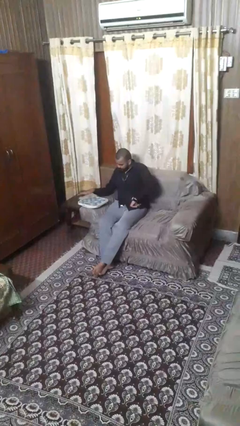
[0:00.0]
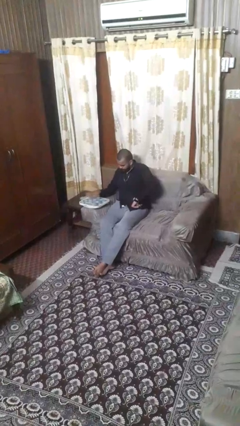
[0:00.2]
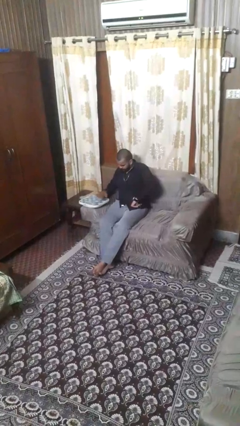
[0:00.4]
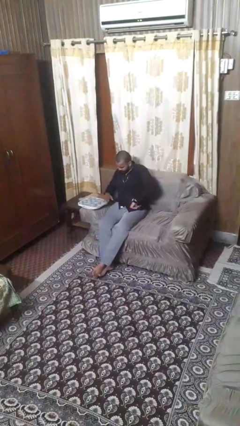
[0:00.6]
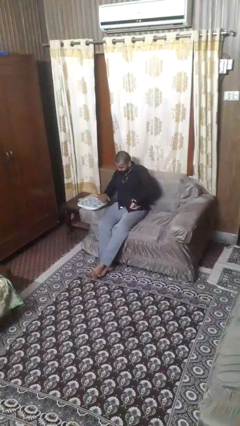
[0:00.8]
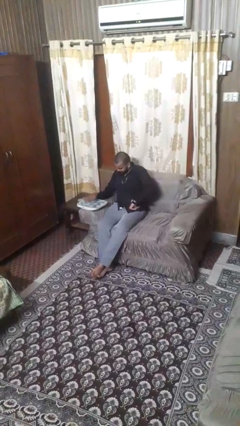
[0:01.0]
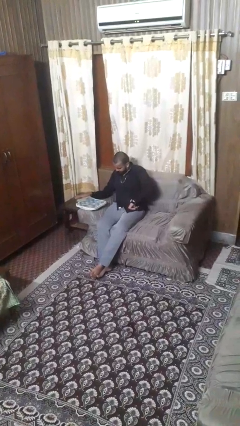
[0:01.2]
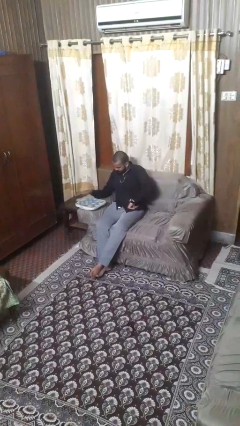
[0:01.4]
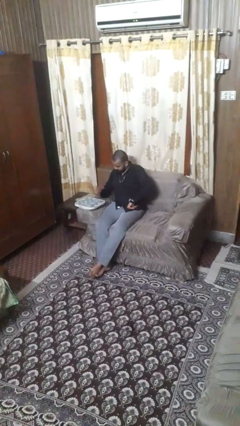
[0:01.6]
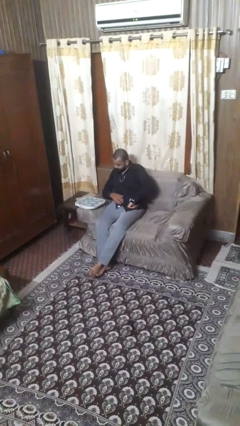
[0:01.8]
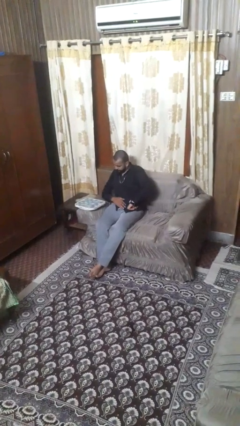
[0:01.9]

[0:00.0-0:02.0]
person waves hand over object

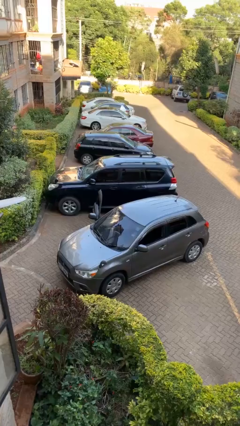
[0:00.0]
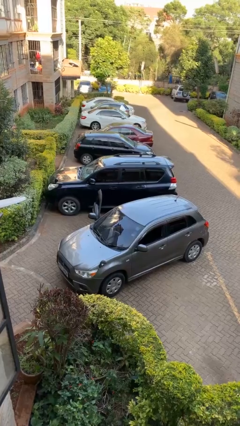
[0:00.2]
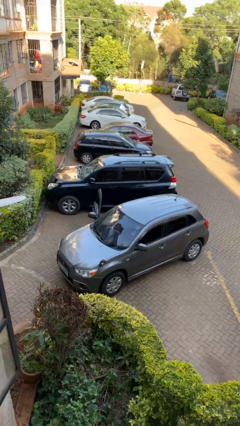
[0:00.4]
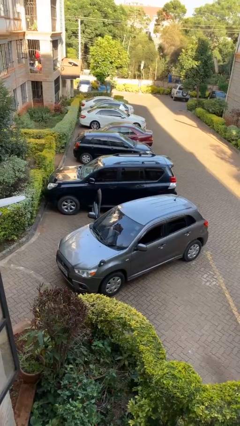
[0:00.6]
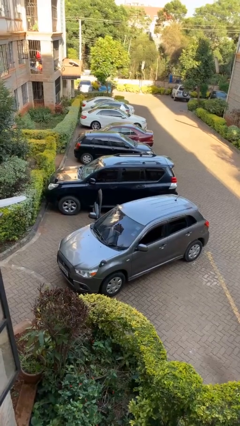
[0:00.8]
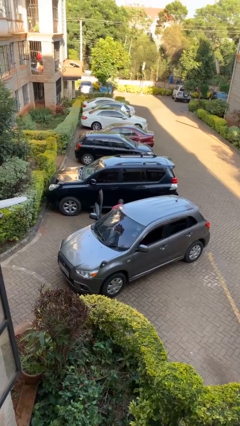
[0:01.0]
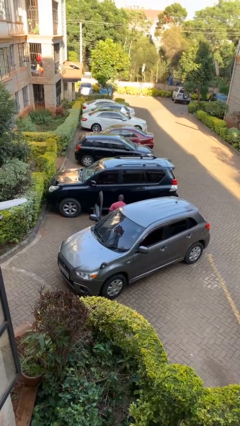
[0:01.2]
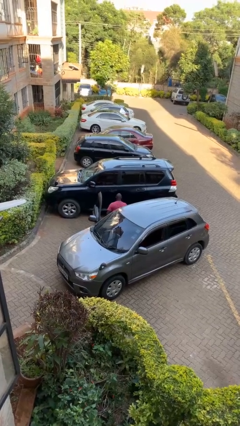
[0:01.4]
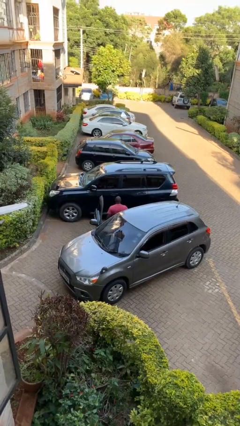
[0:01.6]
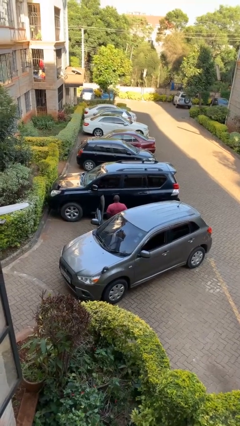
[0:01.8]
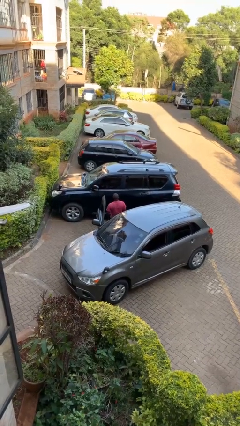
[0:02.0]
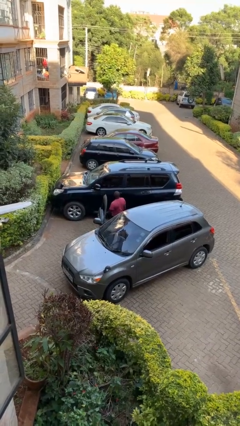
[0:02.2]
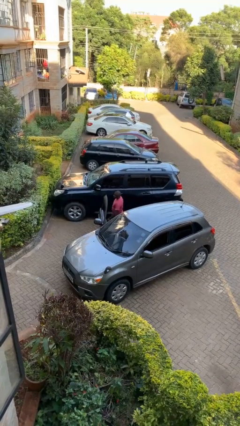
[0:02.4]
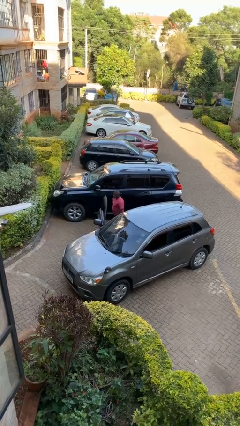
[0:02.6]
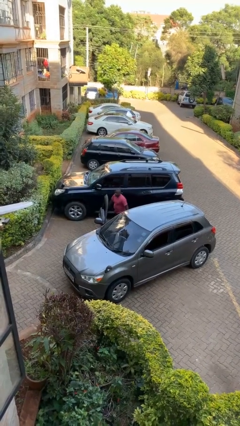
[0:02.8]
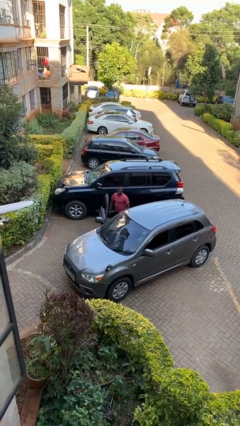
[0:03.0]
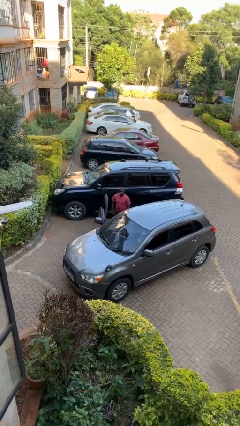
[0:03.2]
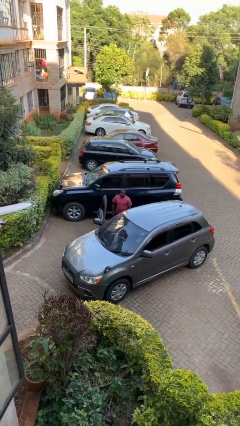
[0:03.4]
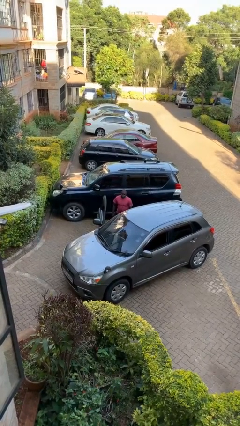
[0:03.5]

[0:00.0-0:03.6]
person exits car

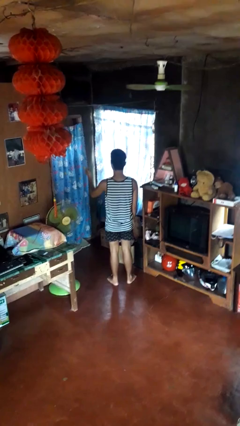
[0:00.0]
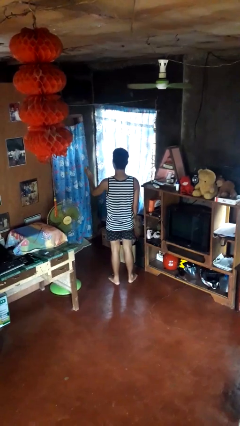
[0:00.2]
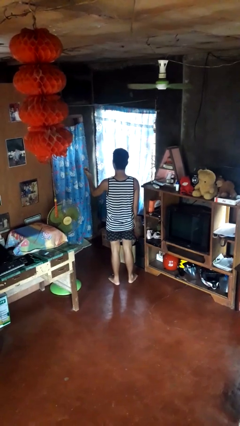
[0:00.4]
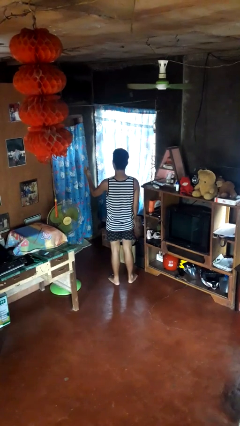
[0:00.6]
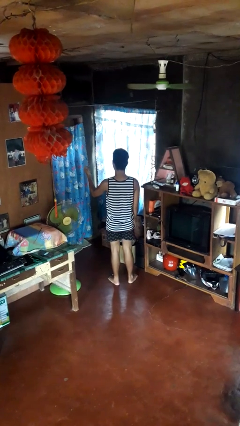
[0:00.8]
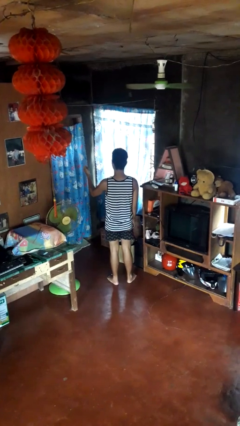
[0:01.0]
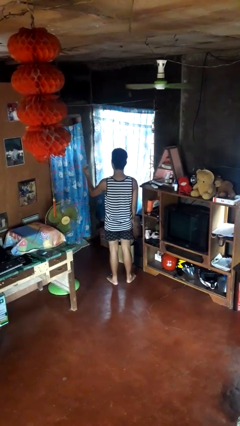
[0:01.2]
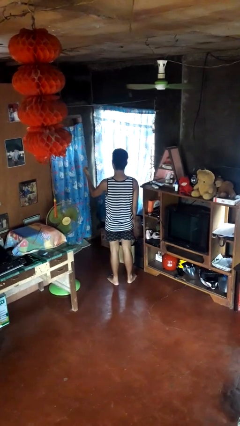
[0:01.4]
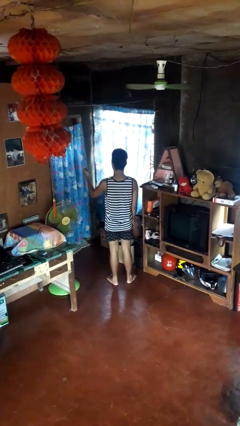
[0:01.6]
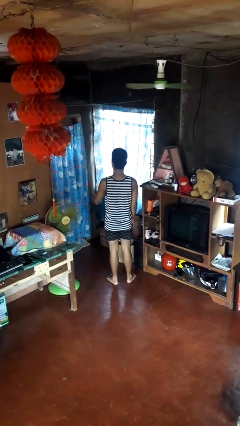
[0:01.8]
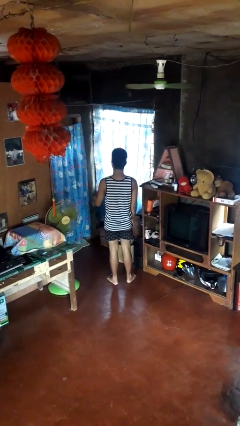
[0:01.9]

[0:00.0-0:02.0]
person snaps fingers

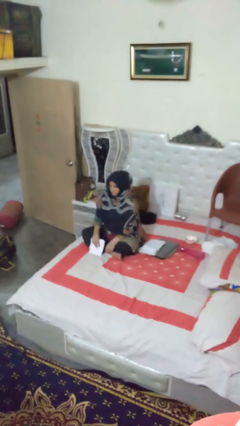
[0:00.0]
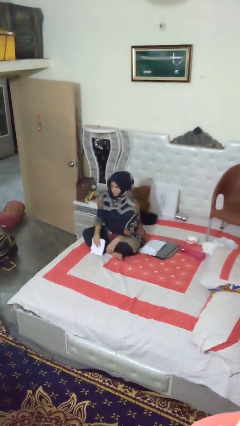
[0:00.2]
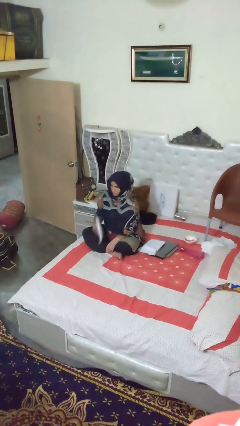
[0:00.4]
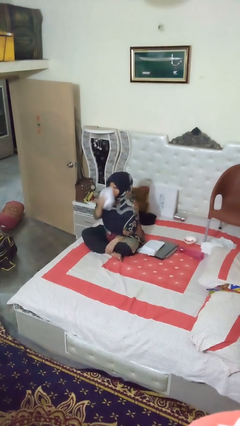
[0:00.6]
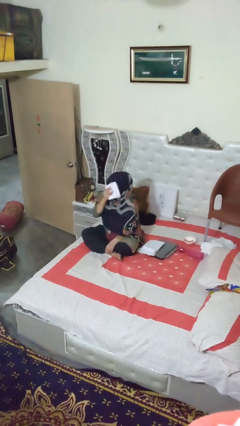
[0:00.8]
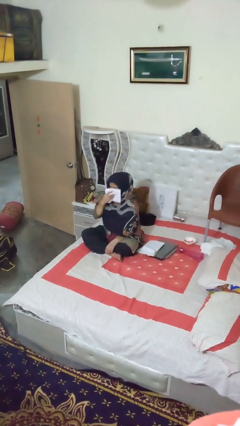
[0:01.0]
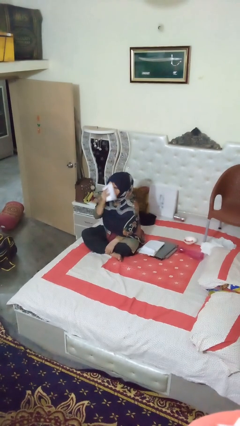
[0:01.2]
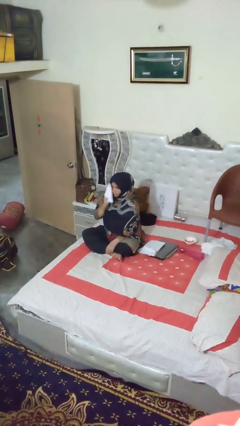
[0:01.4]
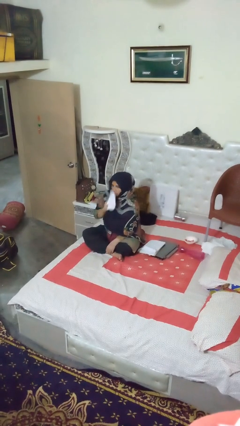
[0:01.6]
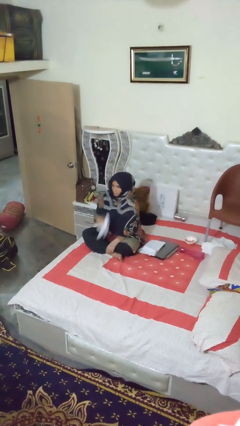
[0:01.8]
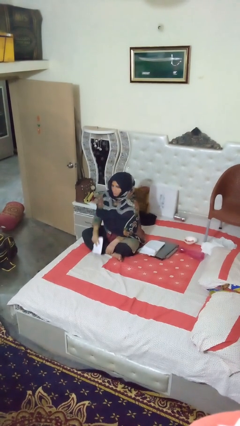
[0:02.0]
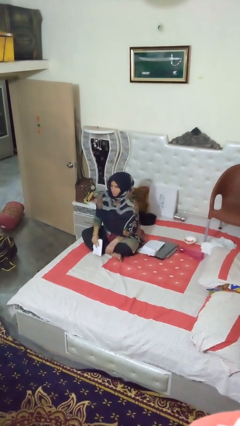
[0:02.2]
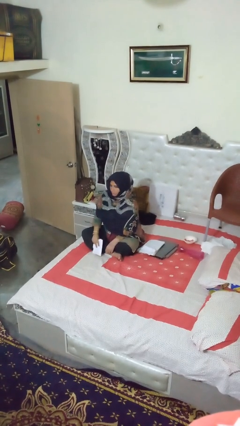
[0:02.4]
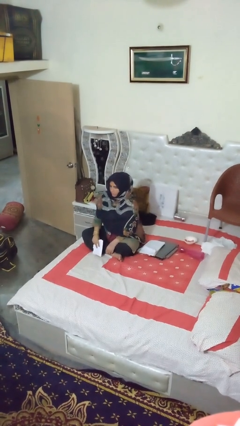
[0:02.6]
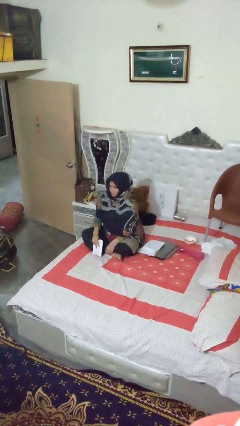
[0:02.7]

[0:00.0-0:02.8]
person wipes mouth with napkin

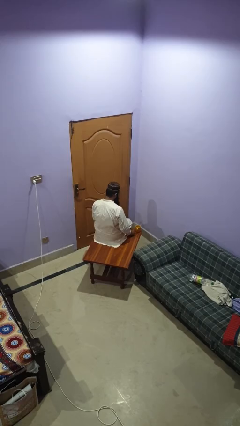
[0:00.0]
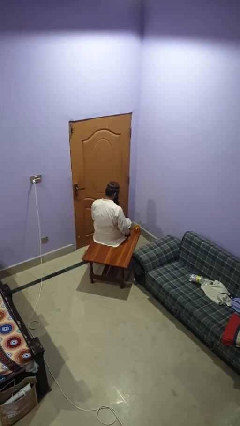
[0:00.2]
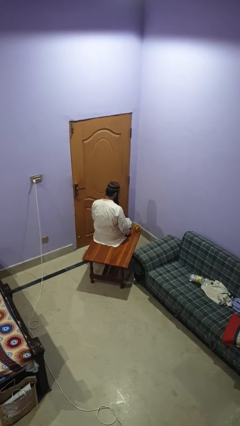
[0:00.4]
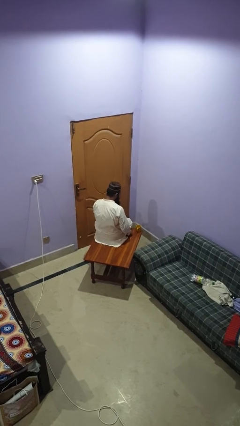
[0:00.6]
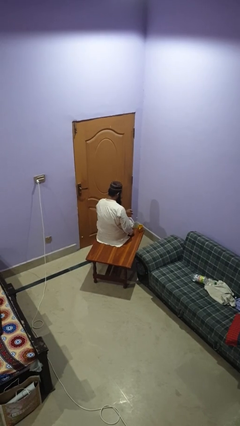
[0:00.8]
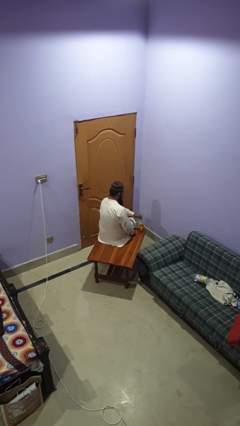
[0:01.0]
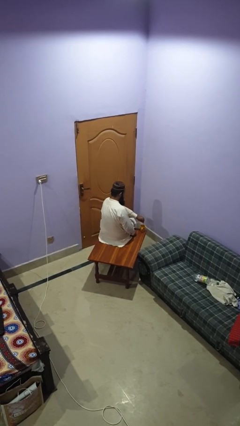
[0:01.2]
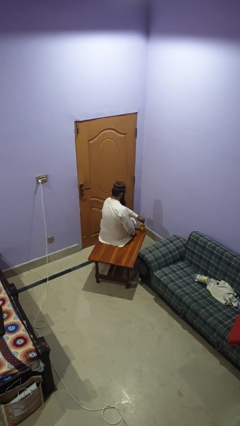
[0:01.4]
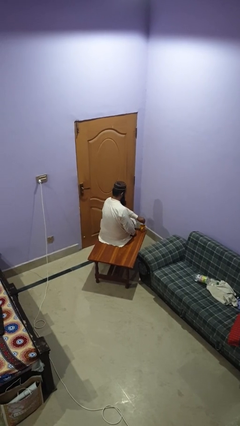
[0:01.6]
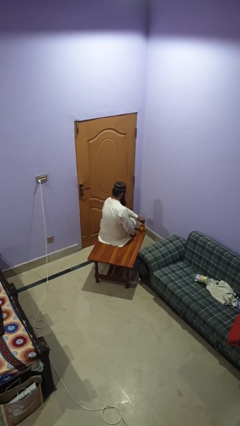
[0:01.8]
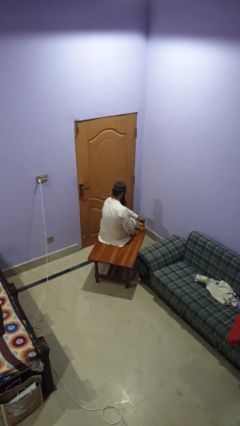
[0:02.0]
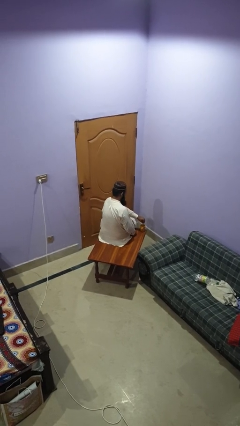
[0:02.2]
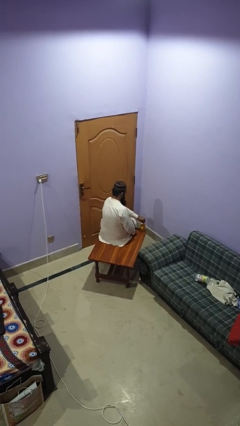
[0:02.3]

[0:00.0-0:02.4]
person stirs mug

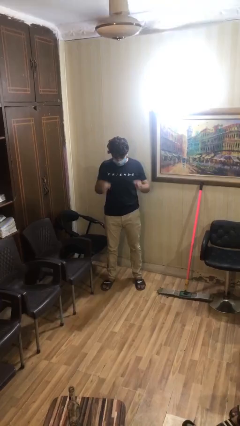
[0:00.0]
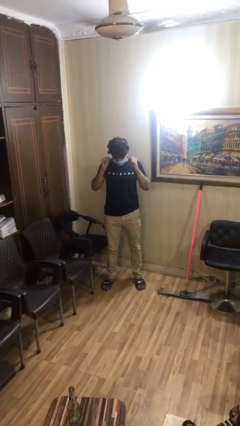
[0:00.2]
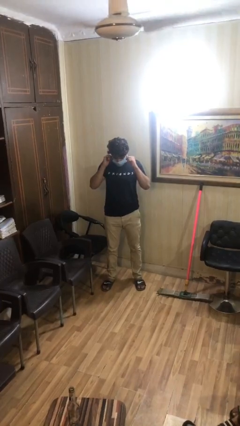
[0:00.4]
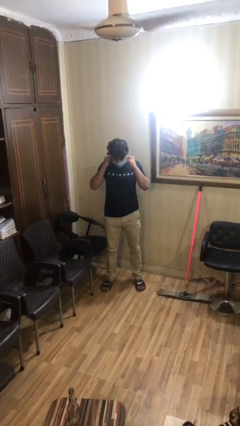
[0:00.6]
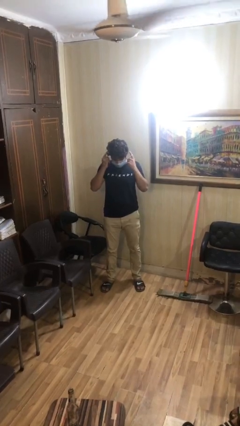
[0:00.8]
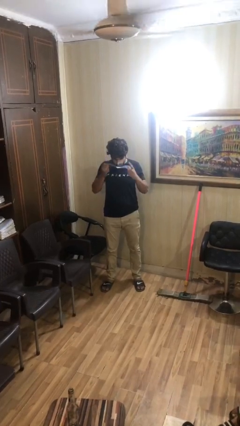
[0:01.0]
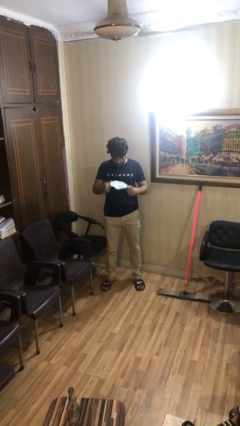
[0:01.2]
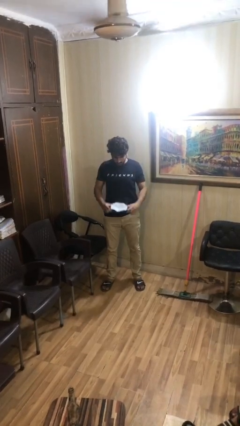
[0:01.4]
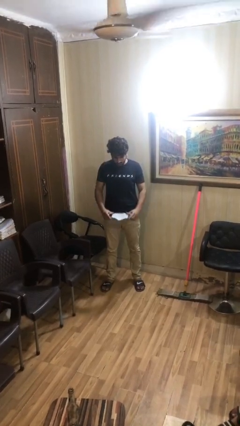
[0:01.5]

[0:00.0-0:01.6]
person takes off facemask

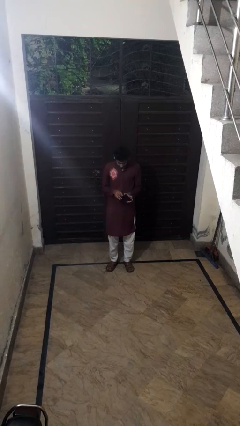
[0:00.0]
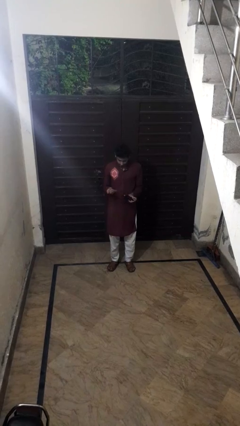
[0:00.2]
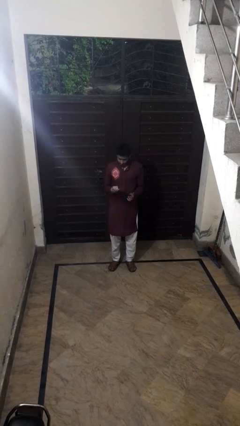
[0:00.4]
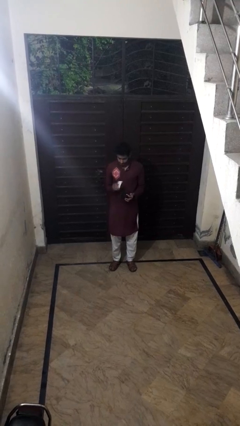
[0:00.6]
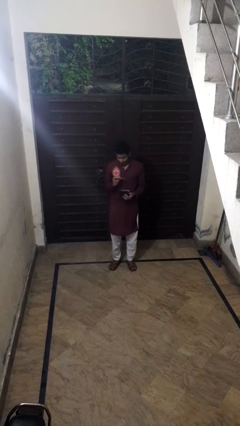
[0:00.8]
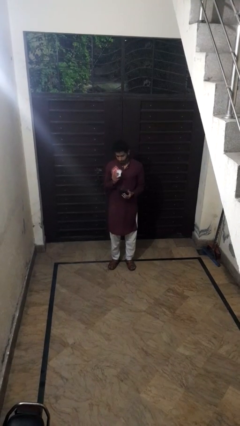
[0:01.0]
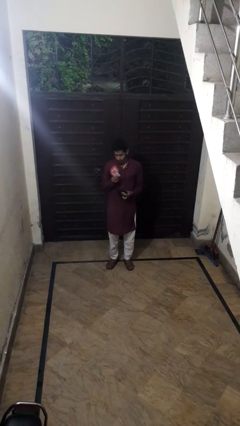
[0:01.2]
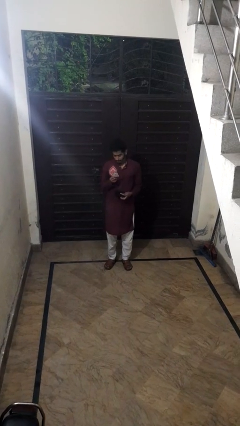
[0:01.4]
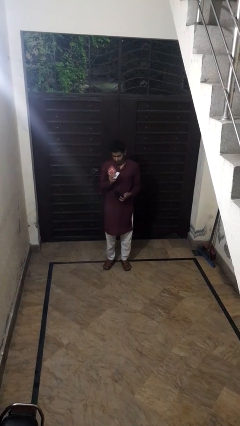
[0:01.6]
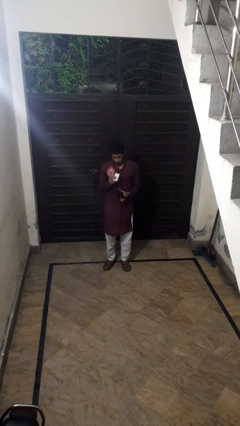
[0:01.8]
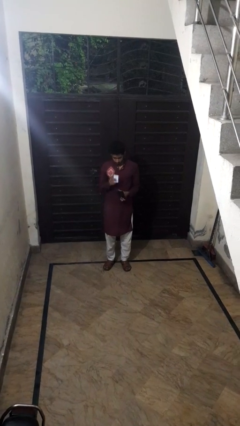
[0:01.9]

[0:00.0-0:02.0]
person takes object from purse
